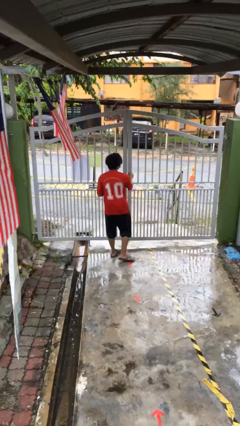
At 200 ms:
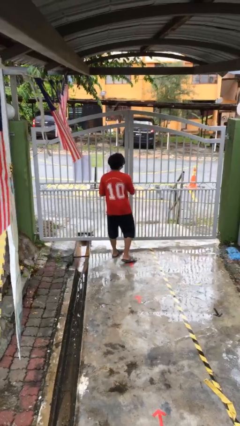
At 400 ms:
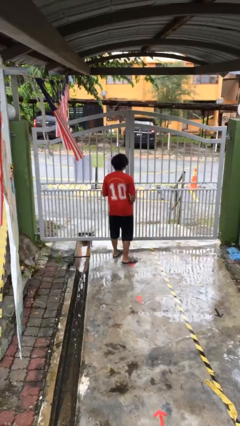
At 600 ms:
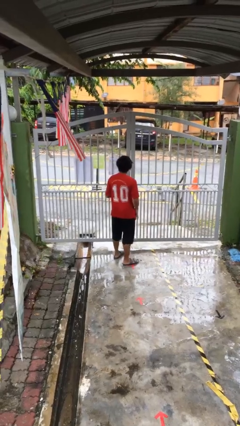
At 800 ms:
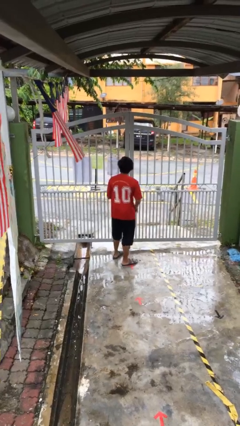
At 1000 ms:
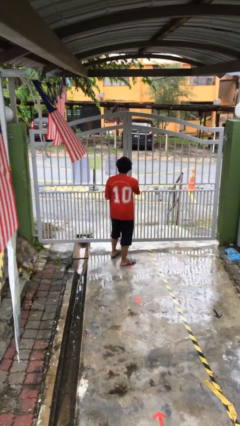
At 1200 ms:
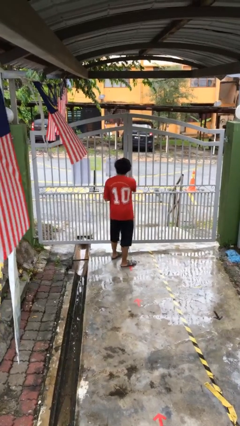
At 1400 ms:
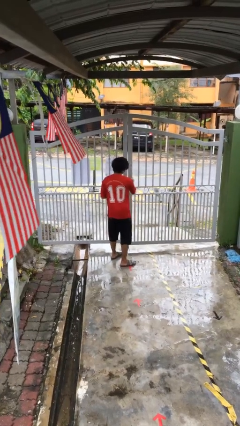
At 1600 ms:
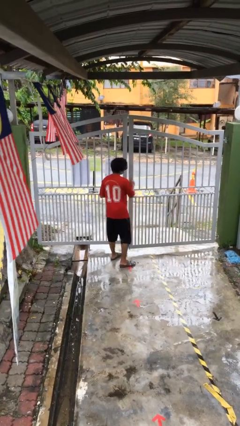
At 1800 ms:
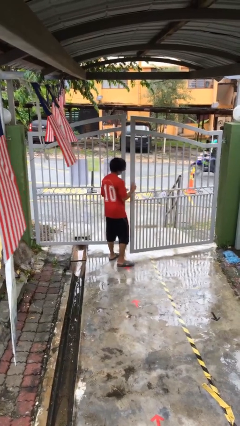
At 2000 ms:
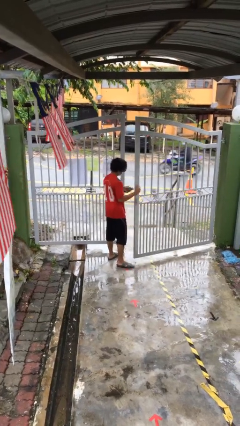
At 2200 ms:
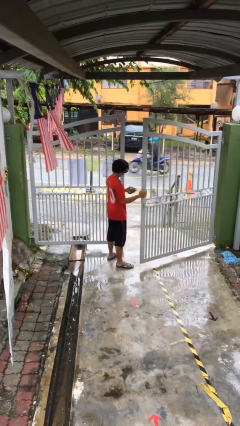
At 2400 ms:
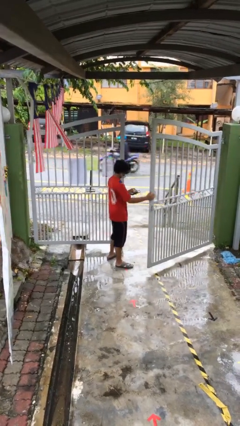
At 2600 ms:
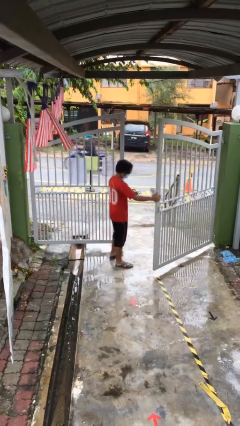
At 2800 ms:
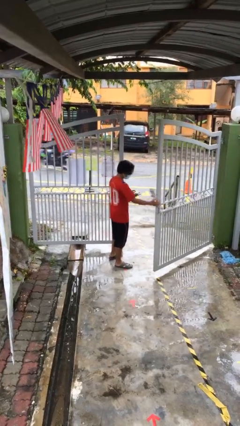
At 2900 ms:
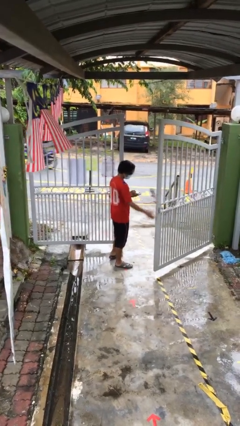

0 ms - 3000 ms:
person opens facility door

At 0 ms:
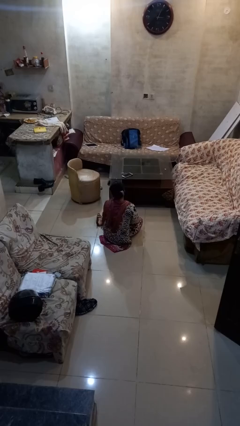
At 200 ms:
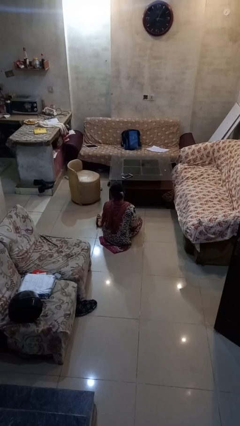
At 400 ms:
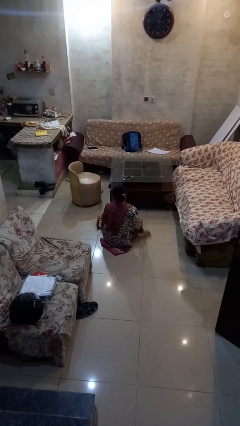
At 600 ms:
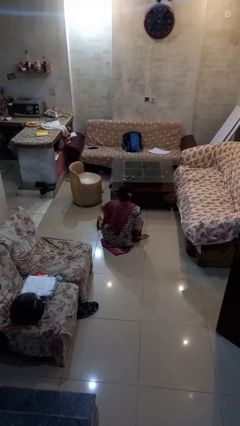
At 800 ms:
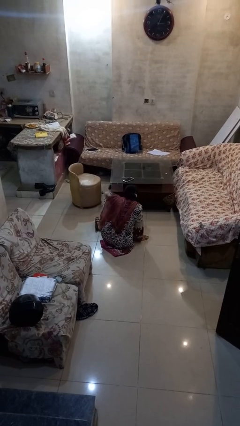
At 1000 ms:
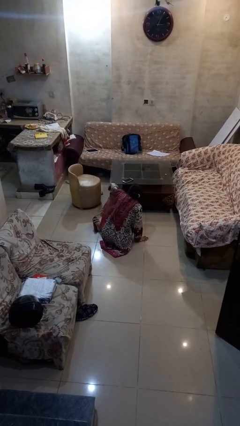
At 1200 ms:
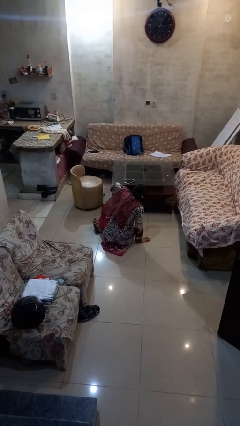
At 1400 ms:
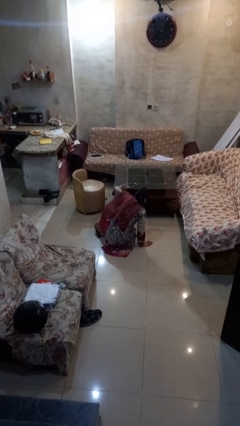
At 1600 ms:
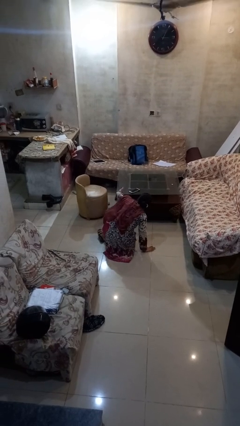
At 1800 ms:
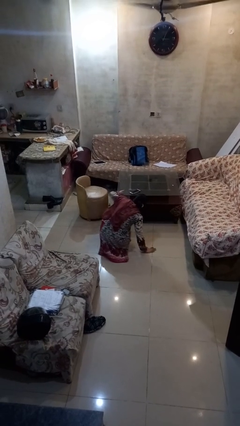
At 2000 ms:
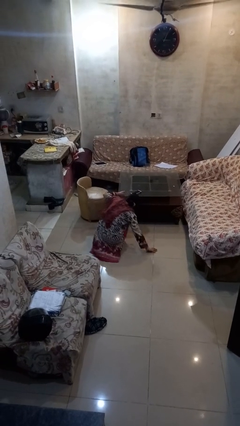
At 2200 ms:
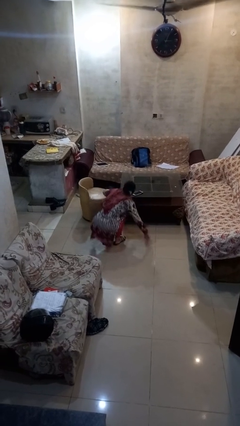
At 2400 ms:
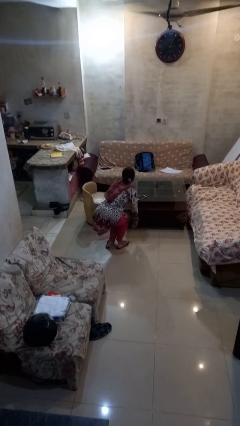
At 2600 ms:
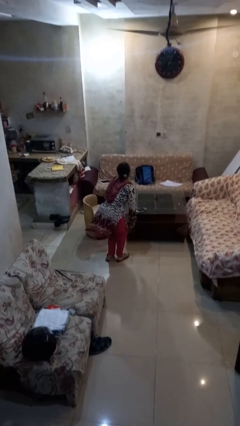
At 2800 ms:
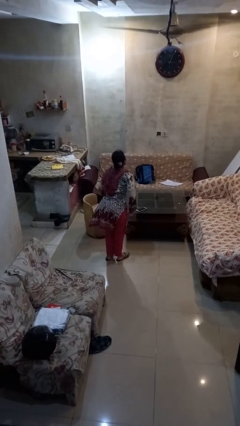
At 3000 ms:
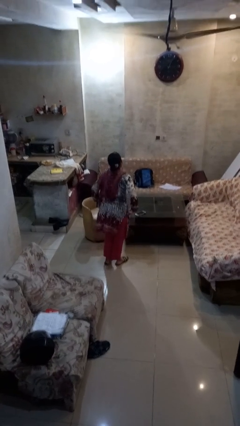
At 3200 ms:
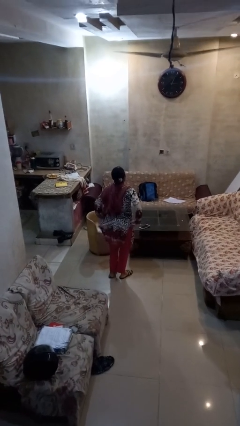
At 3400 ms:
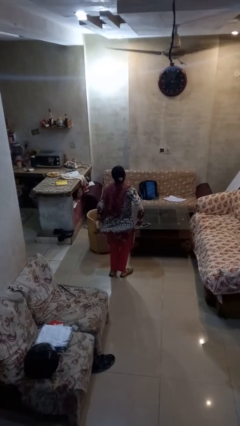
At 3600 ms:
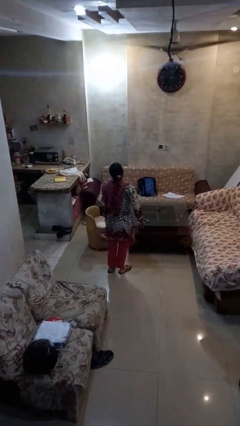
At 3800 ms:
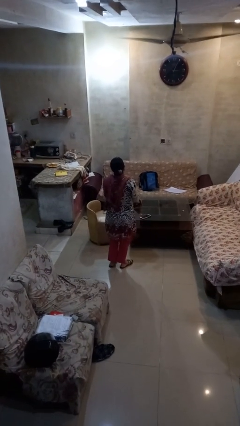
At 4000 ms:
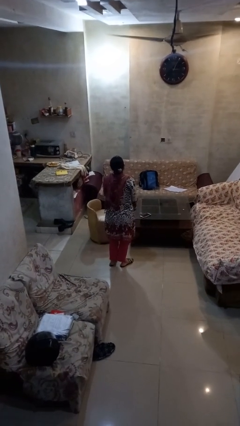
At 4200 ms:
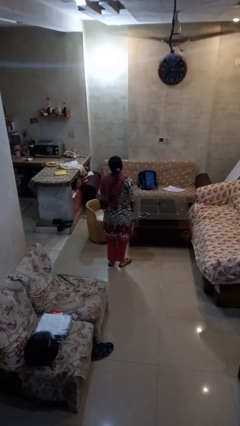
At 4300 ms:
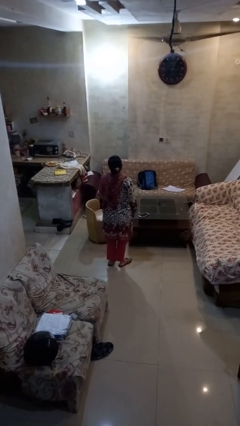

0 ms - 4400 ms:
person stands up from floor

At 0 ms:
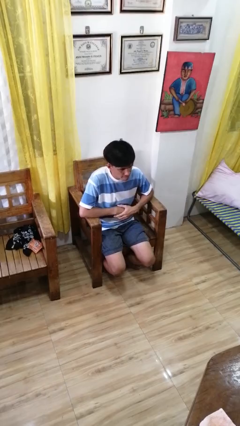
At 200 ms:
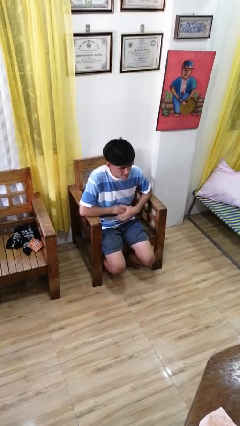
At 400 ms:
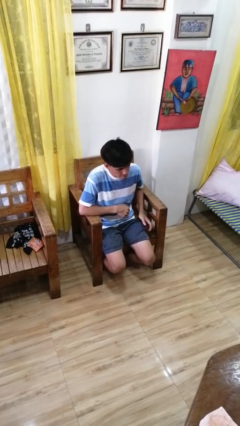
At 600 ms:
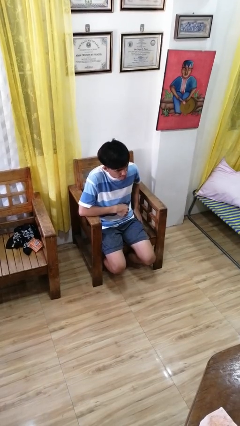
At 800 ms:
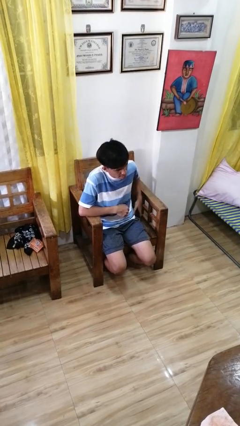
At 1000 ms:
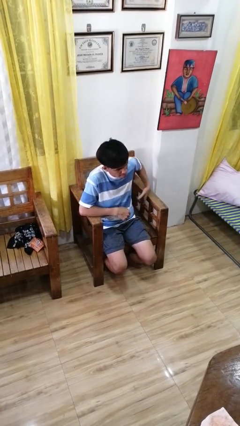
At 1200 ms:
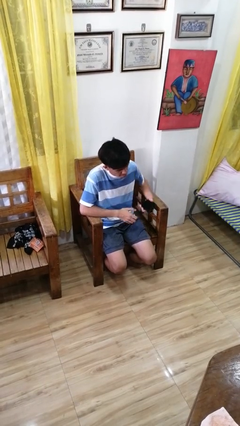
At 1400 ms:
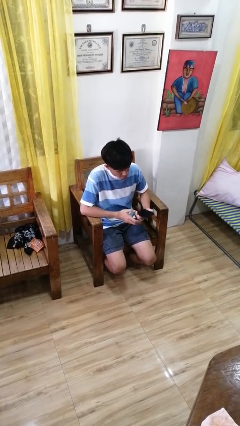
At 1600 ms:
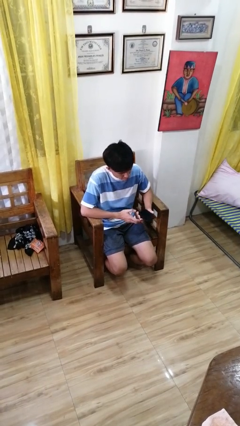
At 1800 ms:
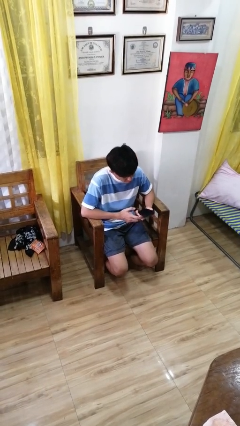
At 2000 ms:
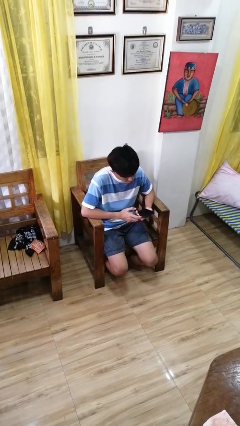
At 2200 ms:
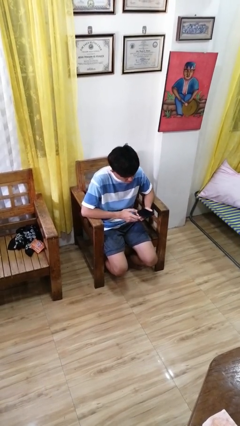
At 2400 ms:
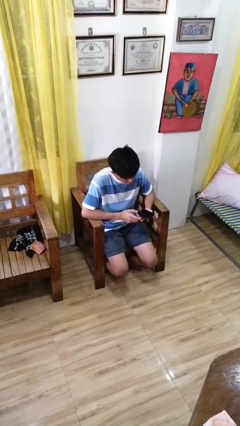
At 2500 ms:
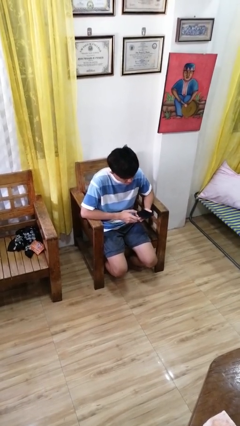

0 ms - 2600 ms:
person takes phone from pocket

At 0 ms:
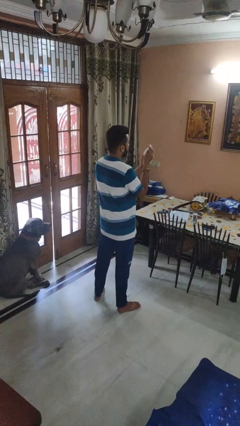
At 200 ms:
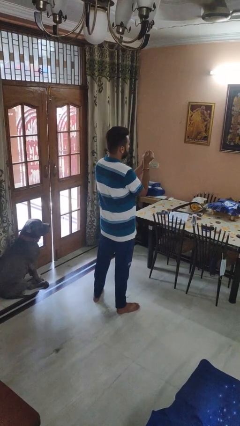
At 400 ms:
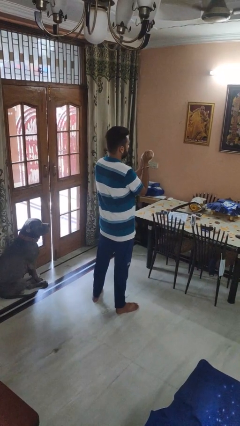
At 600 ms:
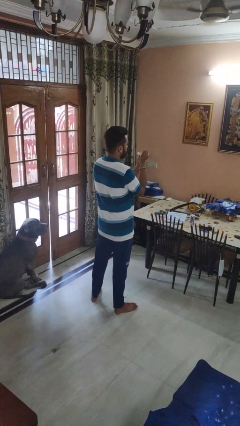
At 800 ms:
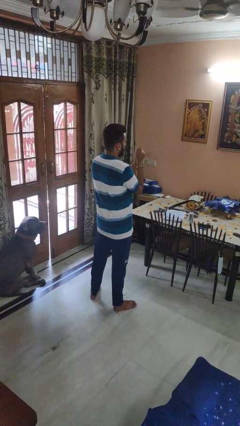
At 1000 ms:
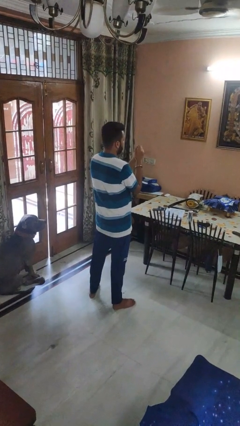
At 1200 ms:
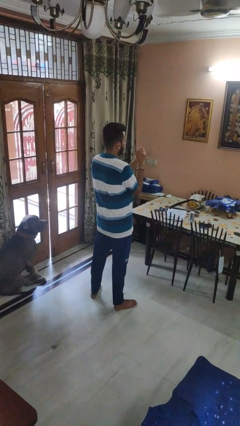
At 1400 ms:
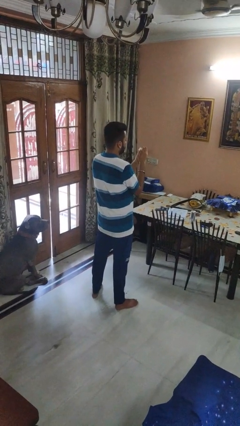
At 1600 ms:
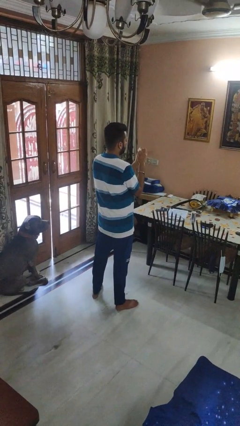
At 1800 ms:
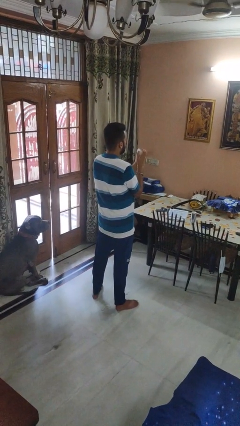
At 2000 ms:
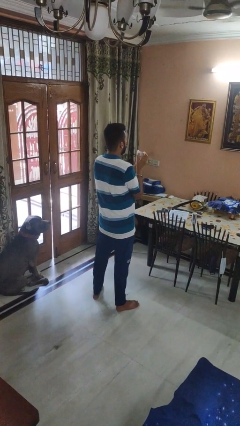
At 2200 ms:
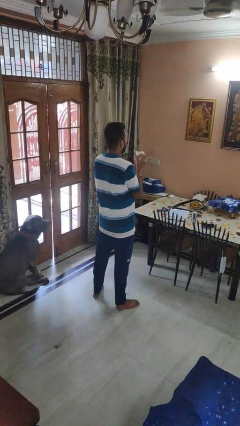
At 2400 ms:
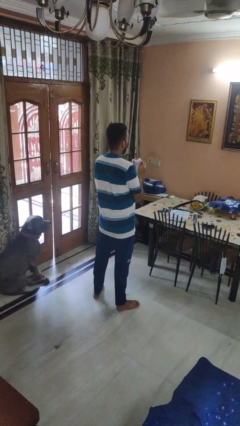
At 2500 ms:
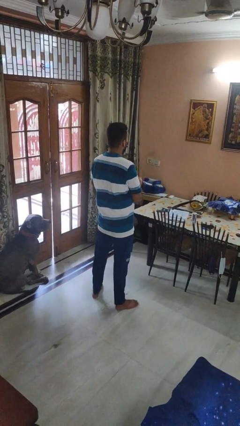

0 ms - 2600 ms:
person crumples paper

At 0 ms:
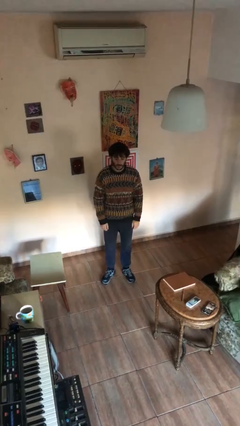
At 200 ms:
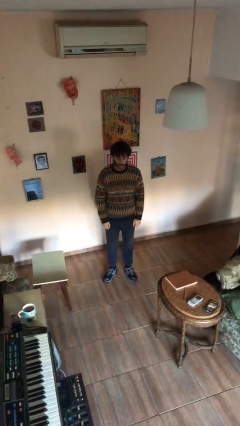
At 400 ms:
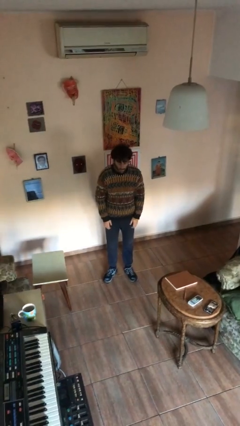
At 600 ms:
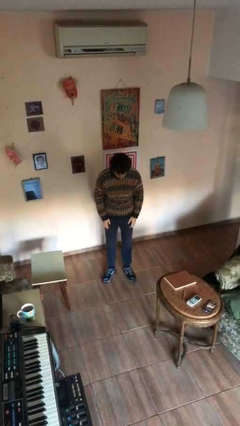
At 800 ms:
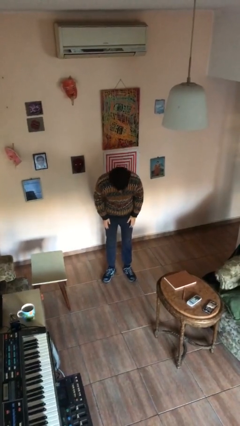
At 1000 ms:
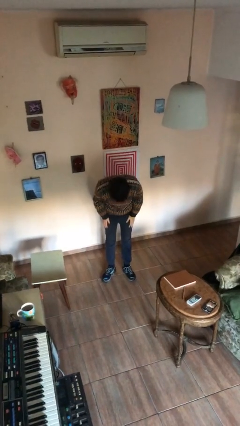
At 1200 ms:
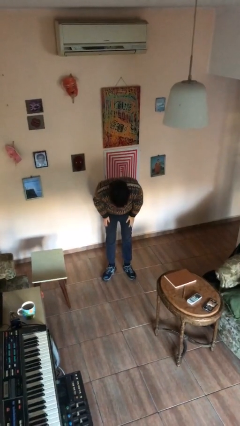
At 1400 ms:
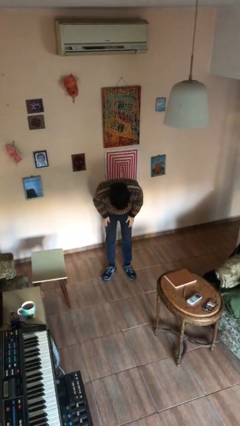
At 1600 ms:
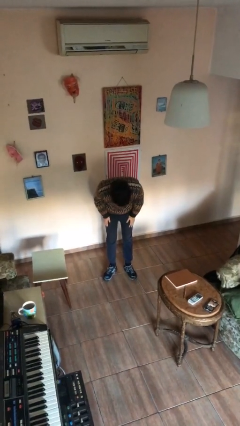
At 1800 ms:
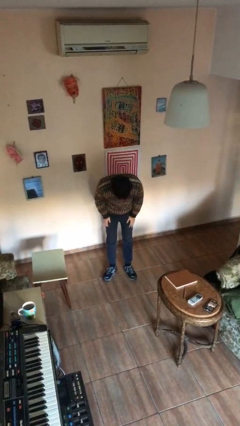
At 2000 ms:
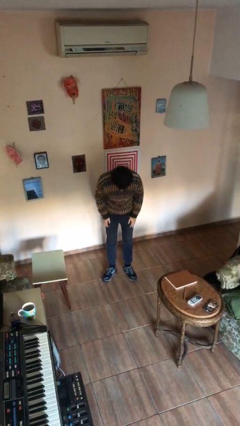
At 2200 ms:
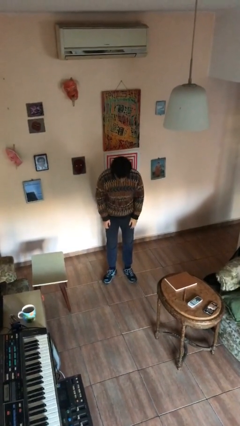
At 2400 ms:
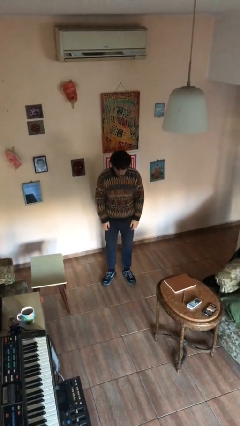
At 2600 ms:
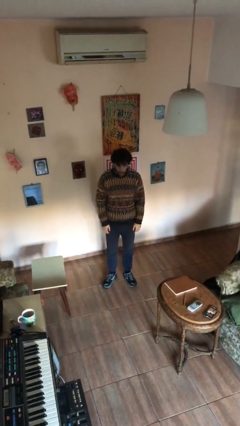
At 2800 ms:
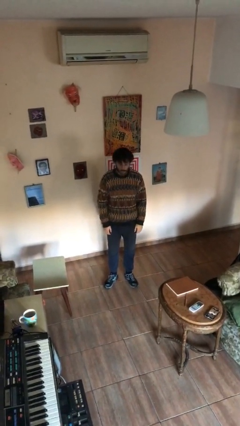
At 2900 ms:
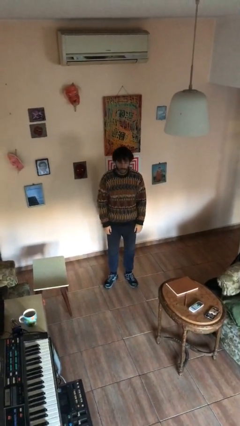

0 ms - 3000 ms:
person bows

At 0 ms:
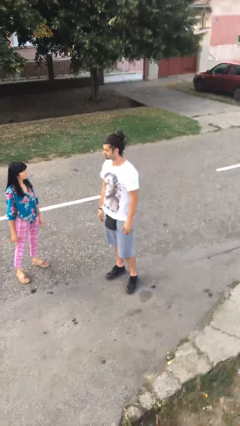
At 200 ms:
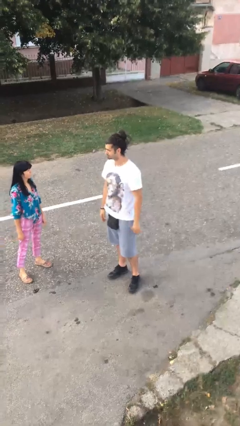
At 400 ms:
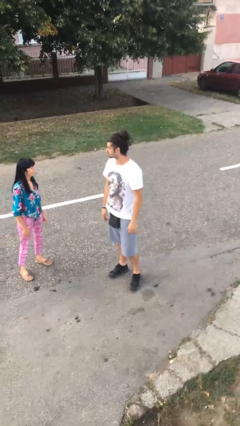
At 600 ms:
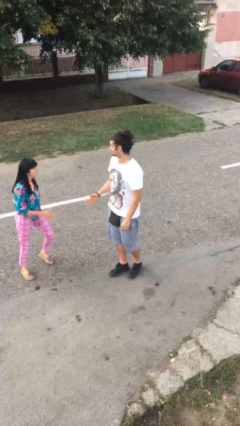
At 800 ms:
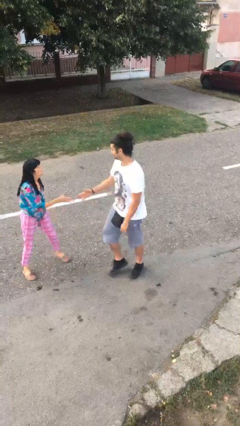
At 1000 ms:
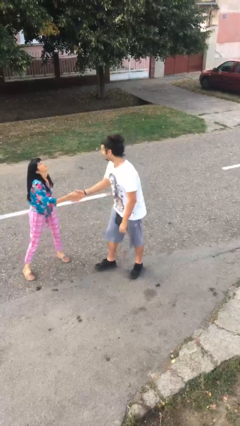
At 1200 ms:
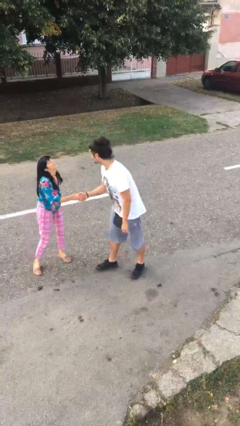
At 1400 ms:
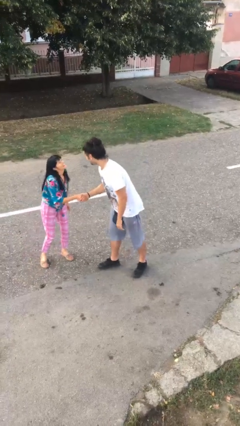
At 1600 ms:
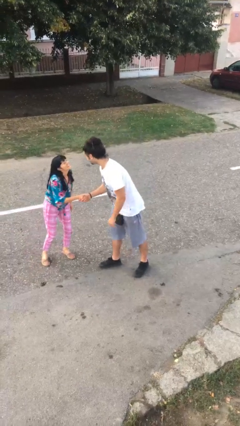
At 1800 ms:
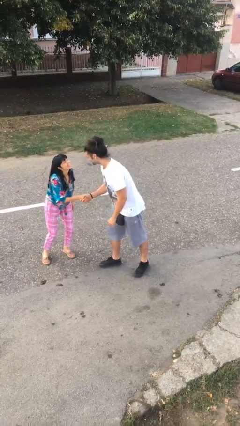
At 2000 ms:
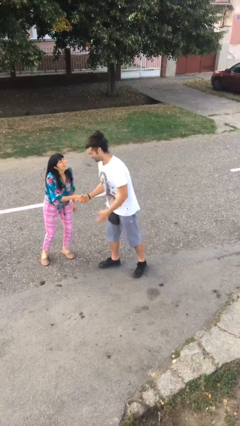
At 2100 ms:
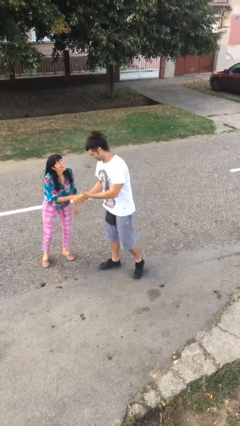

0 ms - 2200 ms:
person shakes hand
